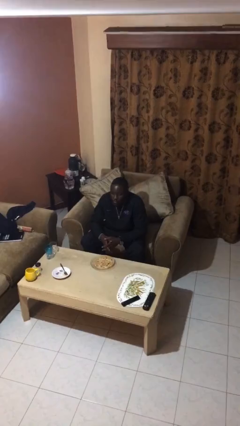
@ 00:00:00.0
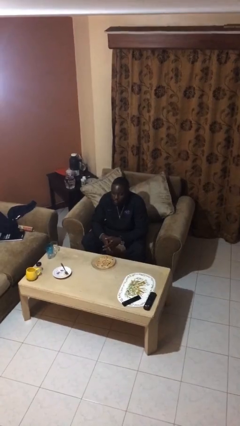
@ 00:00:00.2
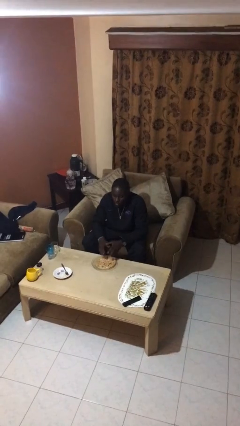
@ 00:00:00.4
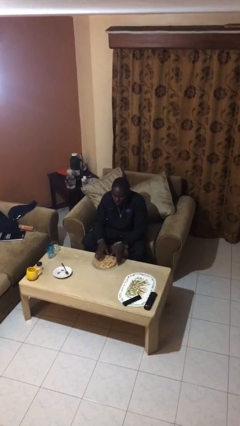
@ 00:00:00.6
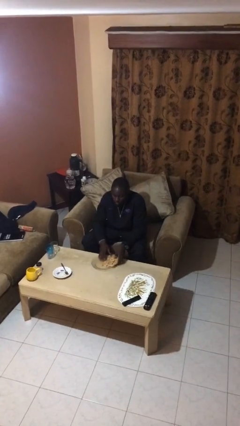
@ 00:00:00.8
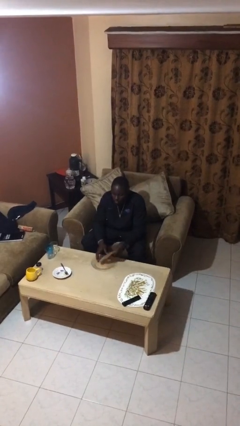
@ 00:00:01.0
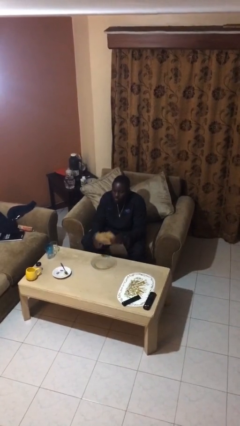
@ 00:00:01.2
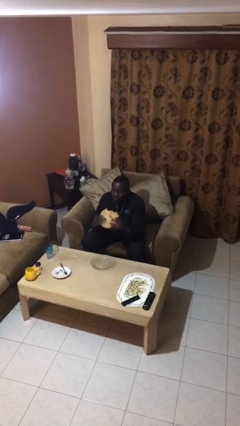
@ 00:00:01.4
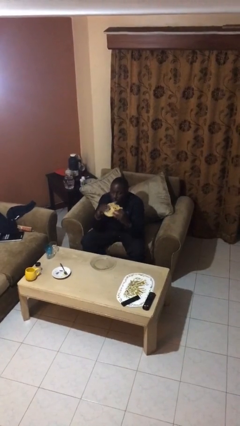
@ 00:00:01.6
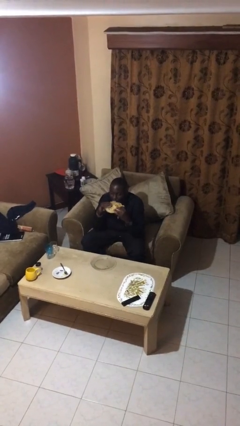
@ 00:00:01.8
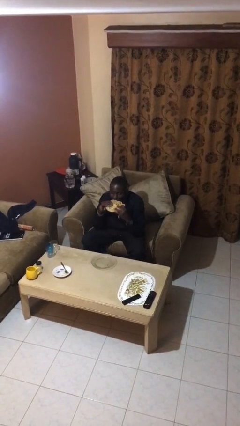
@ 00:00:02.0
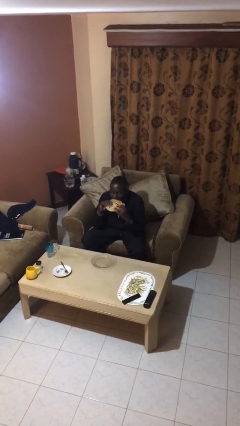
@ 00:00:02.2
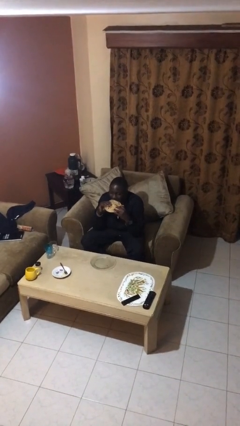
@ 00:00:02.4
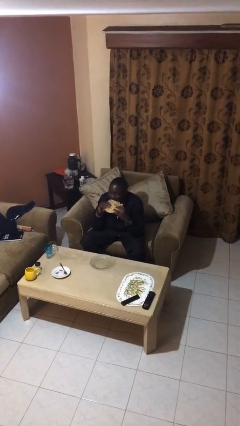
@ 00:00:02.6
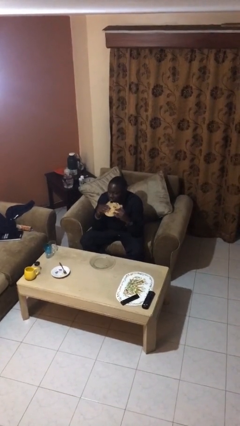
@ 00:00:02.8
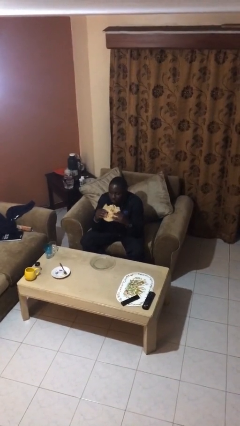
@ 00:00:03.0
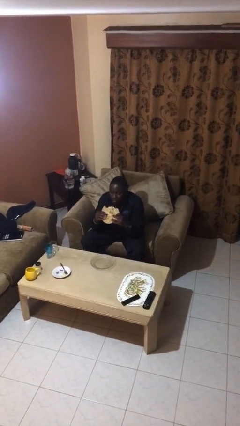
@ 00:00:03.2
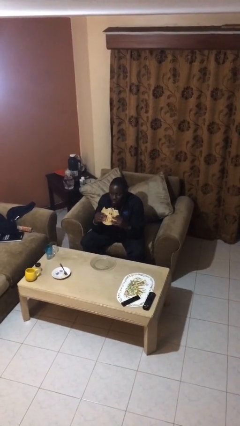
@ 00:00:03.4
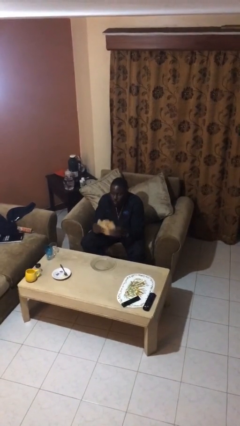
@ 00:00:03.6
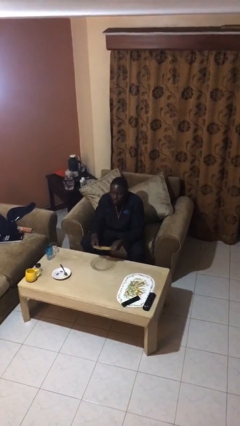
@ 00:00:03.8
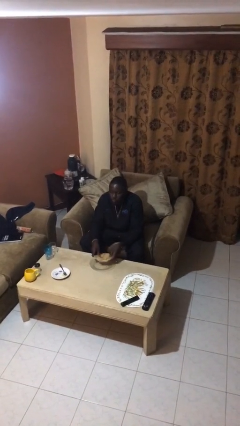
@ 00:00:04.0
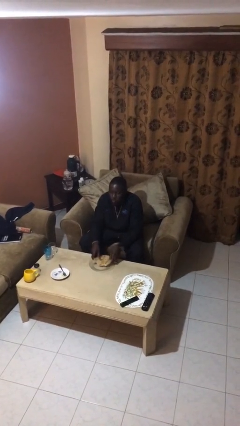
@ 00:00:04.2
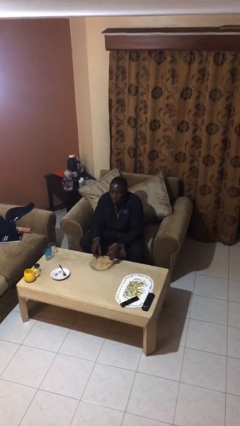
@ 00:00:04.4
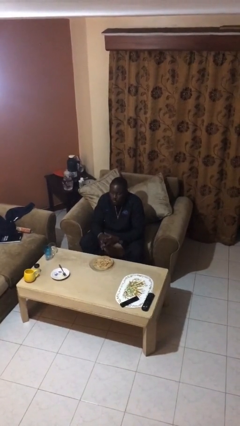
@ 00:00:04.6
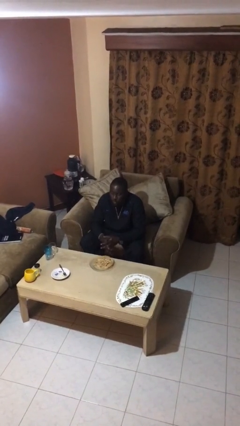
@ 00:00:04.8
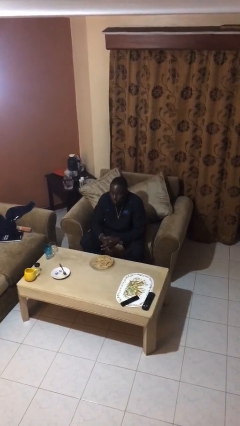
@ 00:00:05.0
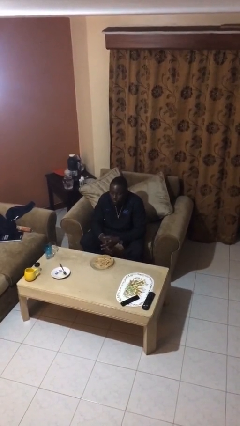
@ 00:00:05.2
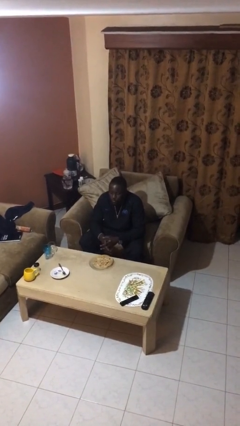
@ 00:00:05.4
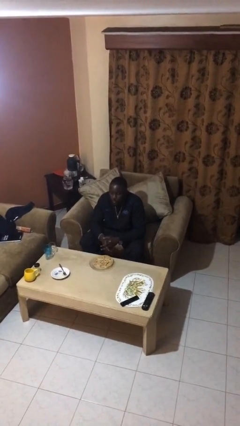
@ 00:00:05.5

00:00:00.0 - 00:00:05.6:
person eats with hands

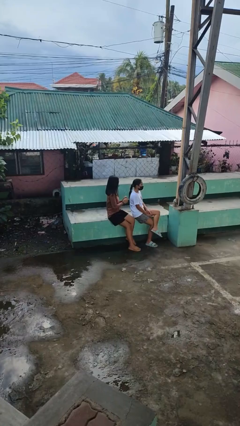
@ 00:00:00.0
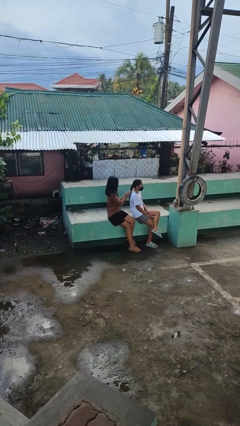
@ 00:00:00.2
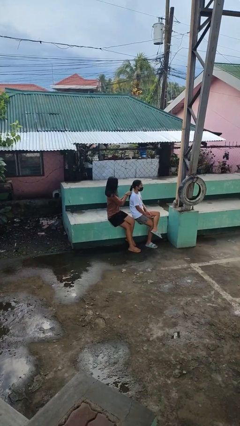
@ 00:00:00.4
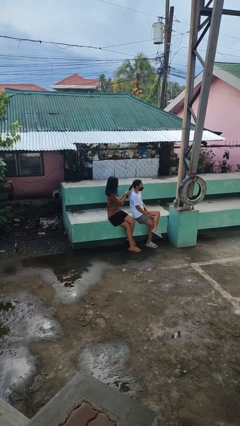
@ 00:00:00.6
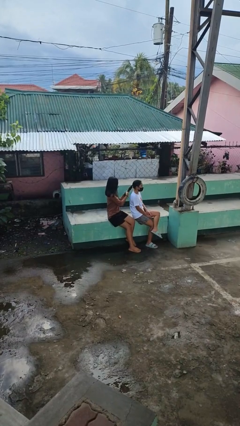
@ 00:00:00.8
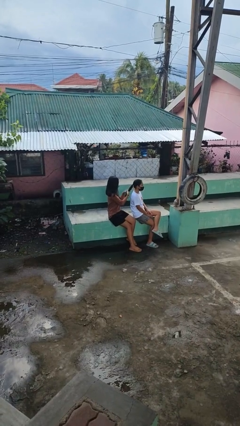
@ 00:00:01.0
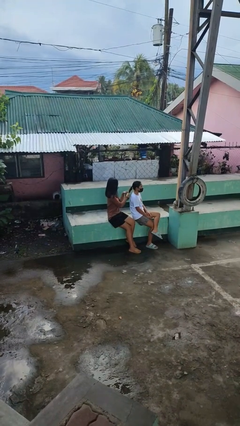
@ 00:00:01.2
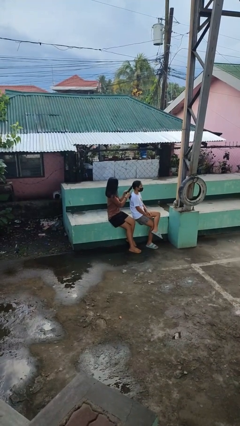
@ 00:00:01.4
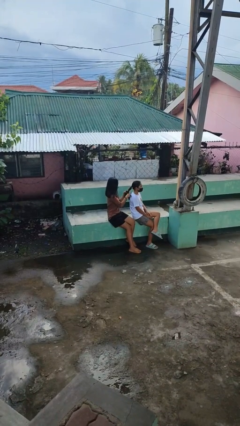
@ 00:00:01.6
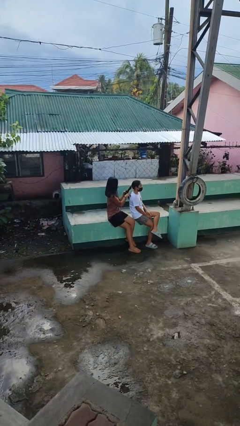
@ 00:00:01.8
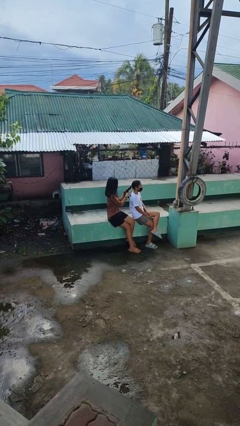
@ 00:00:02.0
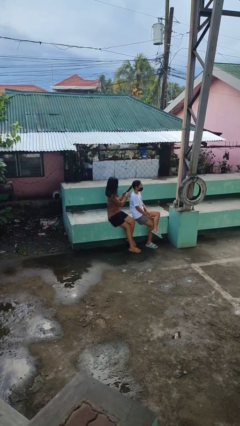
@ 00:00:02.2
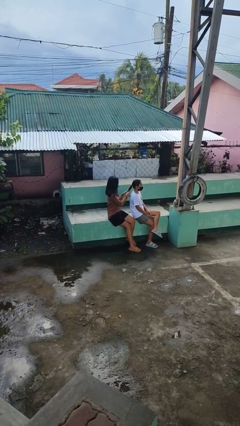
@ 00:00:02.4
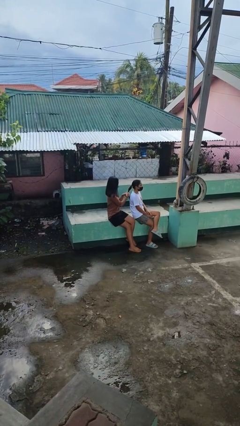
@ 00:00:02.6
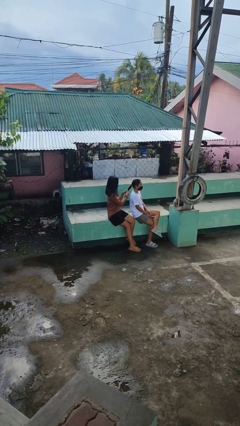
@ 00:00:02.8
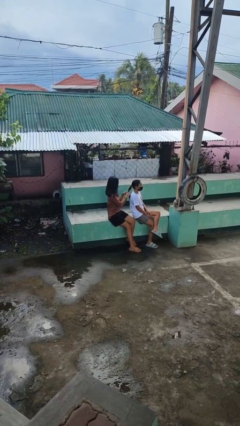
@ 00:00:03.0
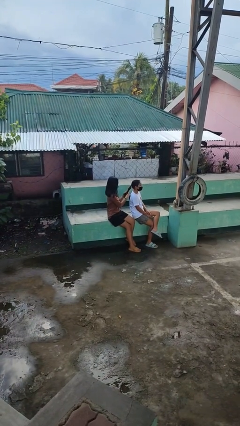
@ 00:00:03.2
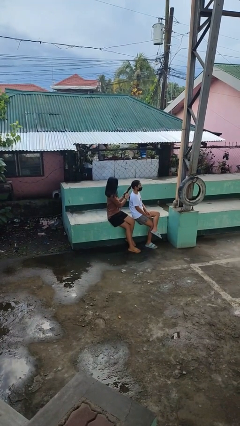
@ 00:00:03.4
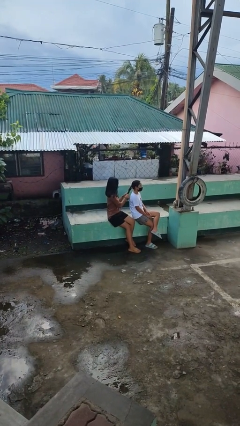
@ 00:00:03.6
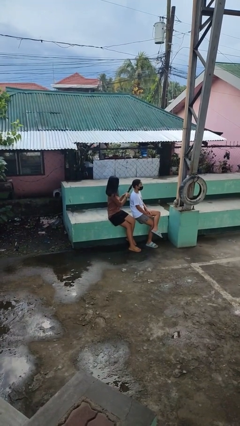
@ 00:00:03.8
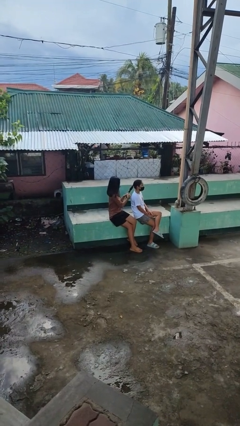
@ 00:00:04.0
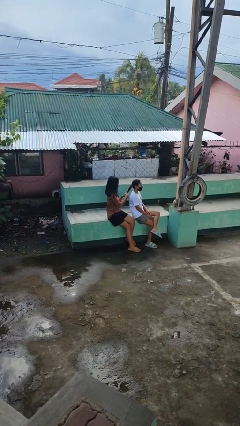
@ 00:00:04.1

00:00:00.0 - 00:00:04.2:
person braids hair of person

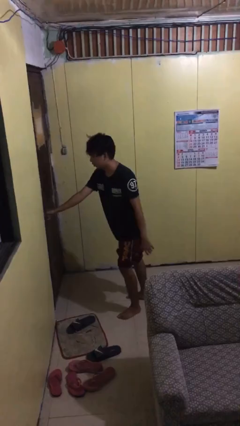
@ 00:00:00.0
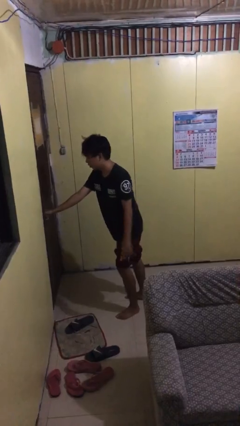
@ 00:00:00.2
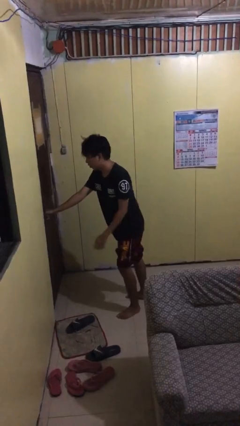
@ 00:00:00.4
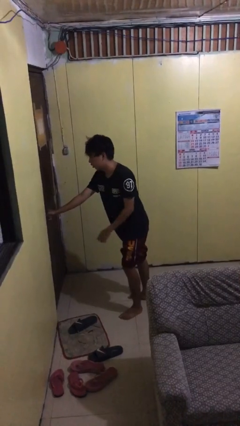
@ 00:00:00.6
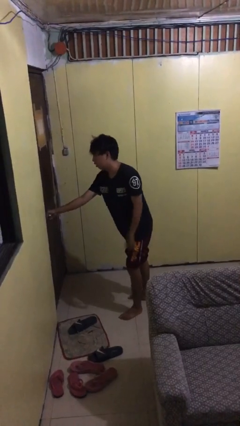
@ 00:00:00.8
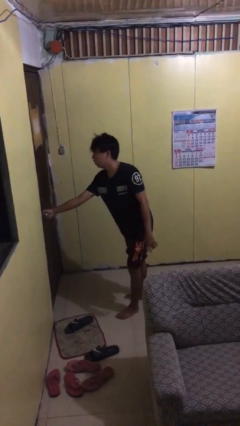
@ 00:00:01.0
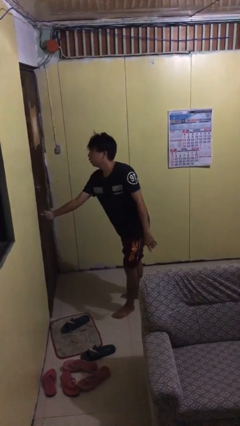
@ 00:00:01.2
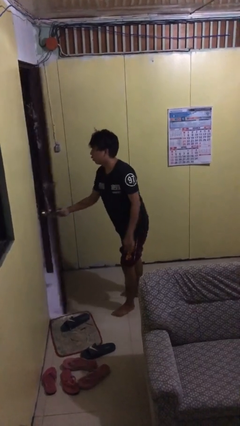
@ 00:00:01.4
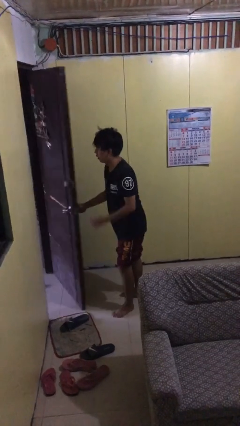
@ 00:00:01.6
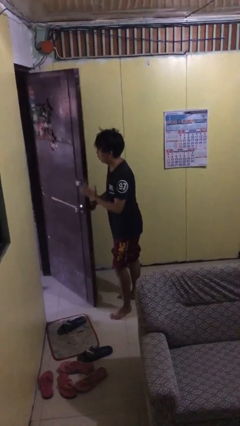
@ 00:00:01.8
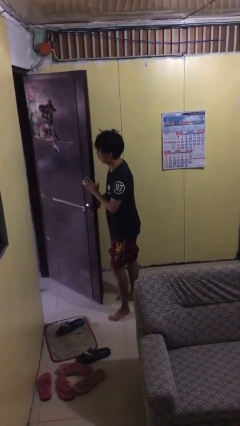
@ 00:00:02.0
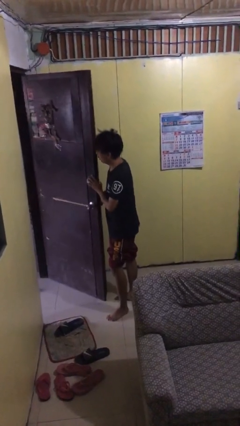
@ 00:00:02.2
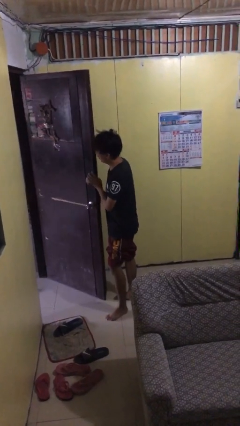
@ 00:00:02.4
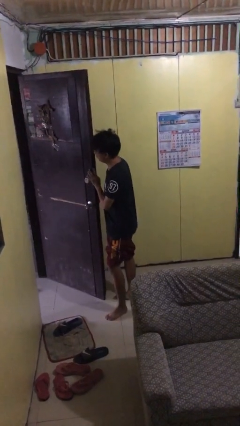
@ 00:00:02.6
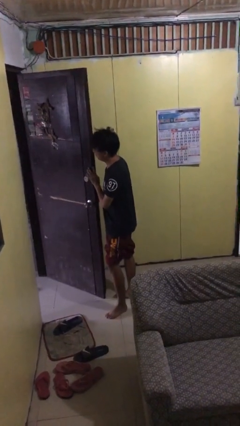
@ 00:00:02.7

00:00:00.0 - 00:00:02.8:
person opens facility door

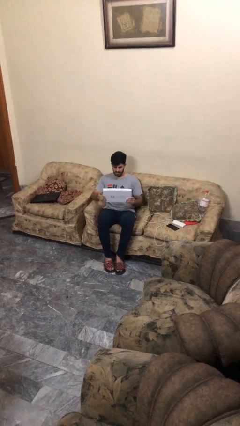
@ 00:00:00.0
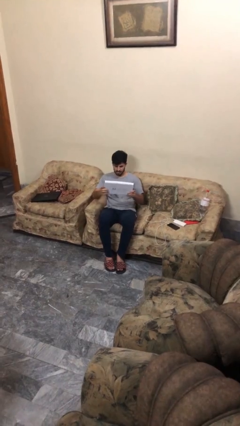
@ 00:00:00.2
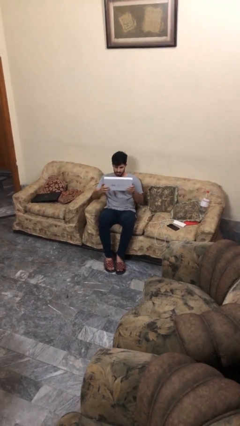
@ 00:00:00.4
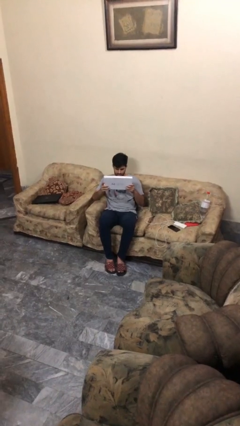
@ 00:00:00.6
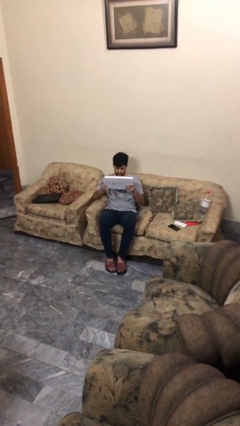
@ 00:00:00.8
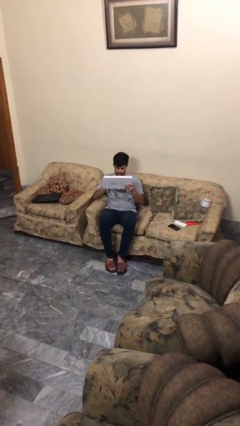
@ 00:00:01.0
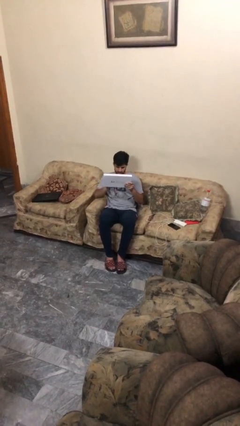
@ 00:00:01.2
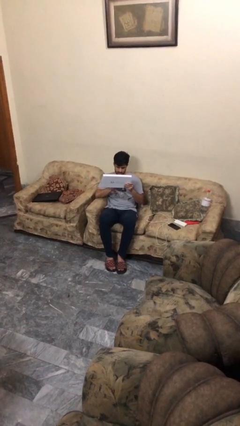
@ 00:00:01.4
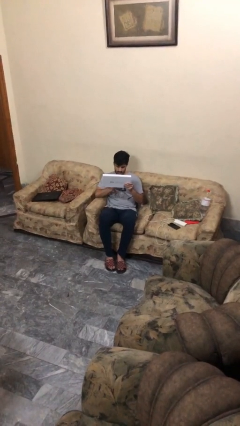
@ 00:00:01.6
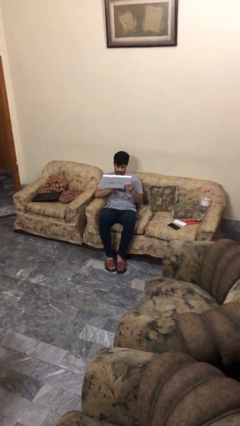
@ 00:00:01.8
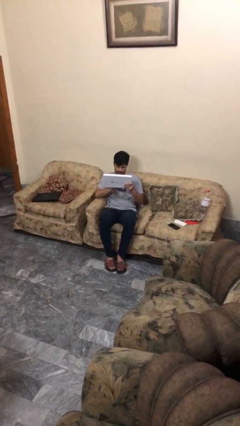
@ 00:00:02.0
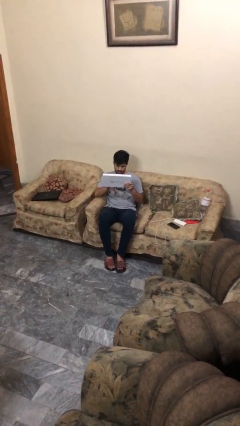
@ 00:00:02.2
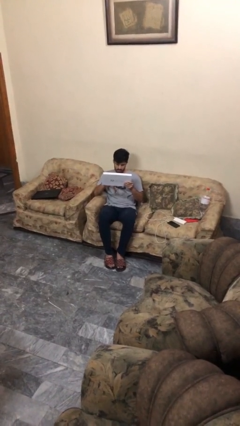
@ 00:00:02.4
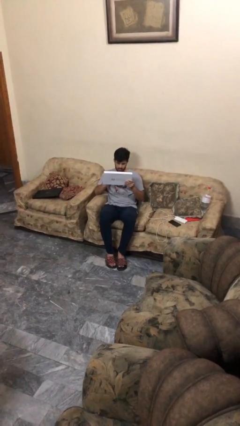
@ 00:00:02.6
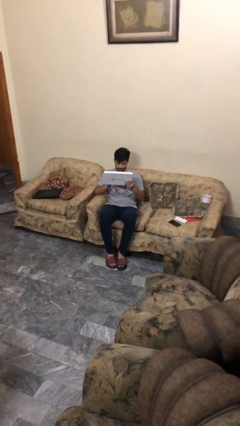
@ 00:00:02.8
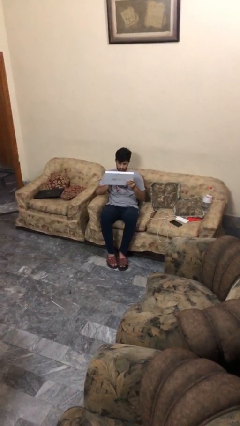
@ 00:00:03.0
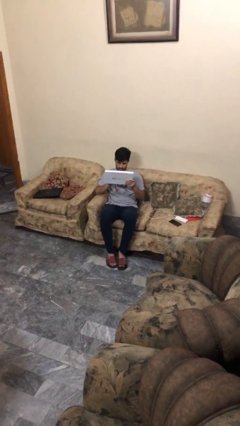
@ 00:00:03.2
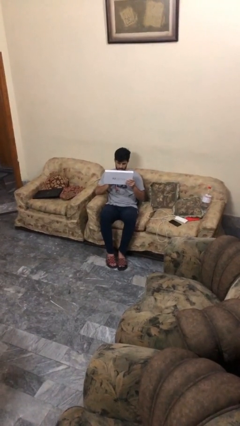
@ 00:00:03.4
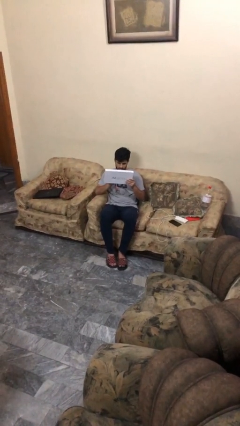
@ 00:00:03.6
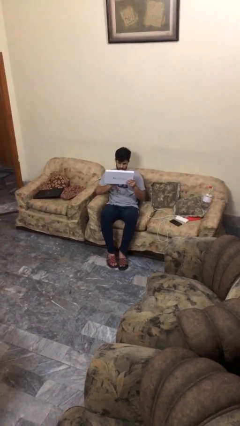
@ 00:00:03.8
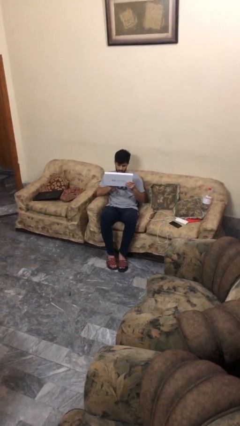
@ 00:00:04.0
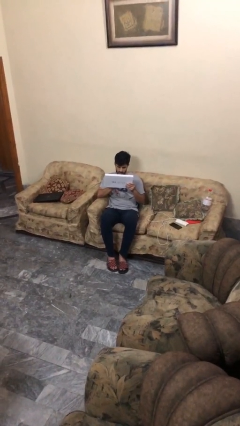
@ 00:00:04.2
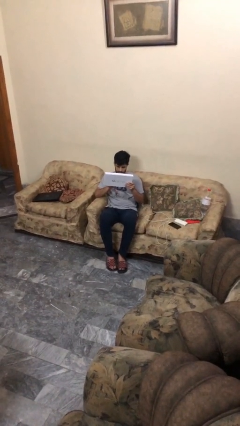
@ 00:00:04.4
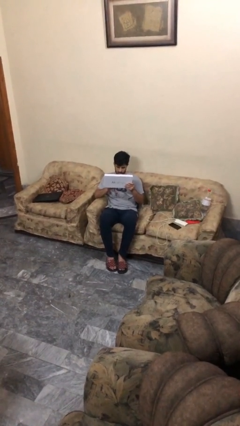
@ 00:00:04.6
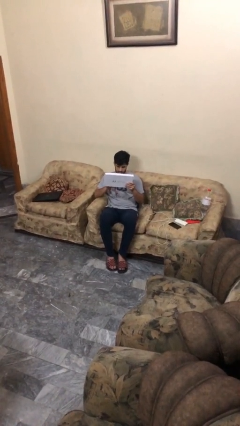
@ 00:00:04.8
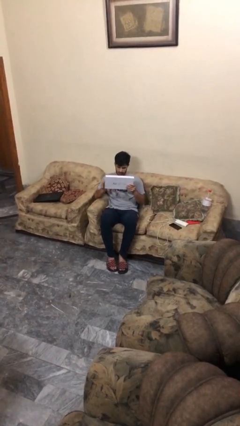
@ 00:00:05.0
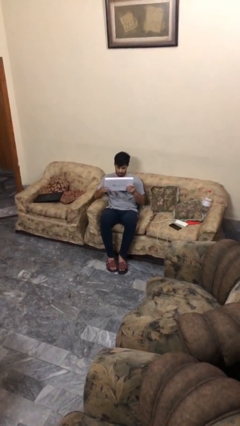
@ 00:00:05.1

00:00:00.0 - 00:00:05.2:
person interacts with tablet
